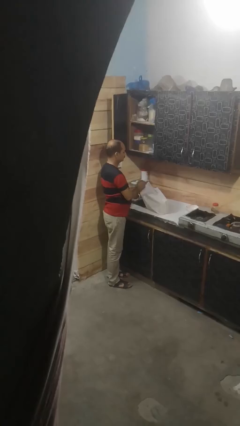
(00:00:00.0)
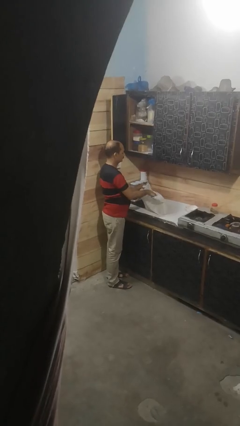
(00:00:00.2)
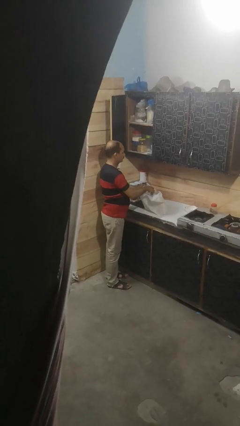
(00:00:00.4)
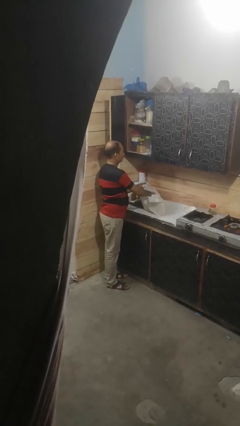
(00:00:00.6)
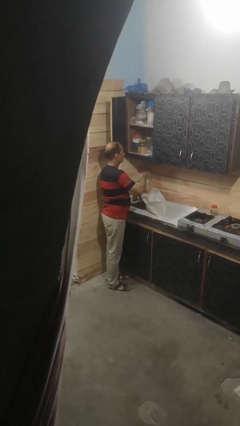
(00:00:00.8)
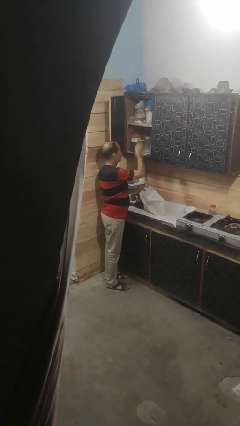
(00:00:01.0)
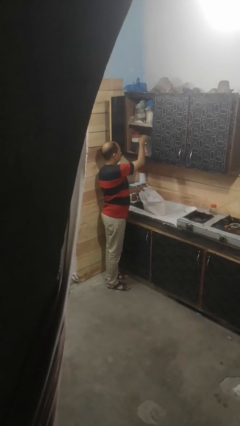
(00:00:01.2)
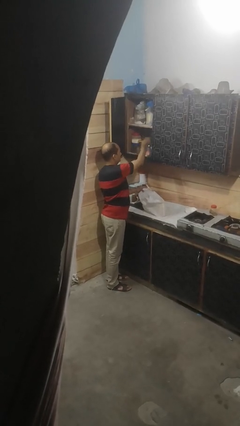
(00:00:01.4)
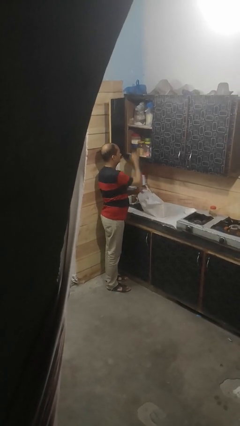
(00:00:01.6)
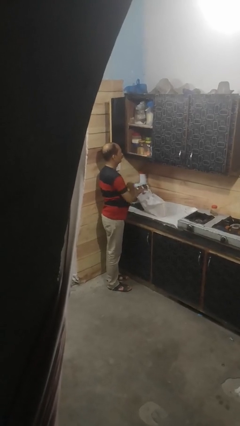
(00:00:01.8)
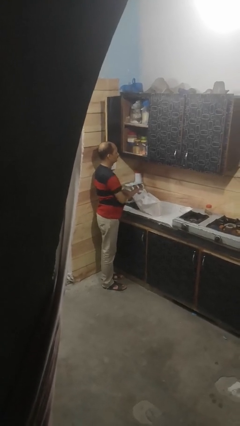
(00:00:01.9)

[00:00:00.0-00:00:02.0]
person loads groceries into cabinet

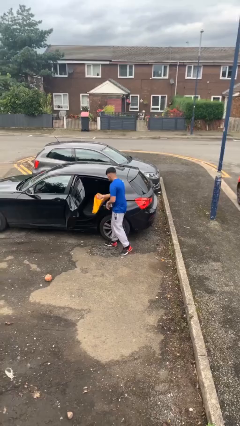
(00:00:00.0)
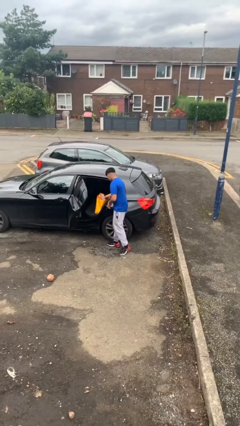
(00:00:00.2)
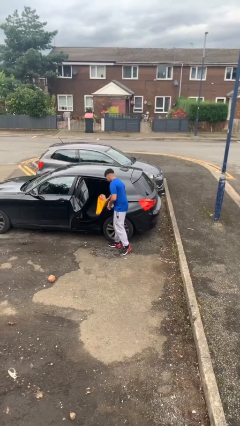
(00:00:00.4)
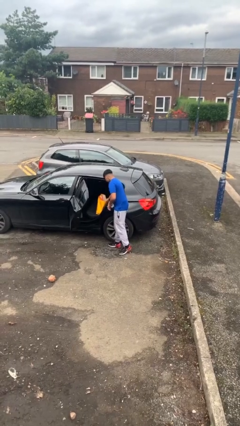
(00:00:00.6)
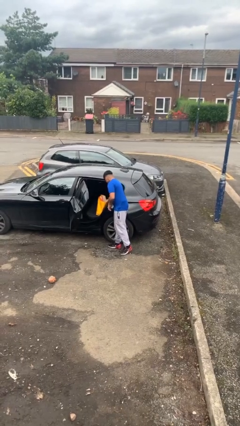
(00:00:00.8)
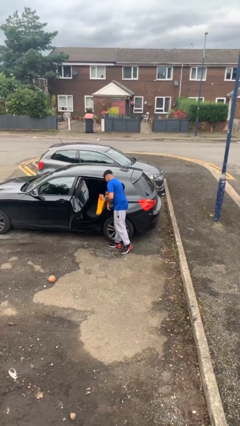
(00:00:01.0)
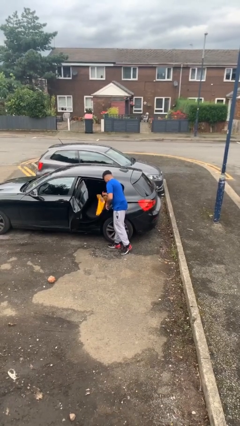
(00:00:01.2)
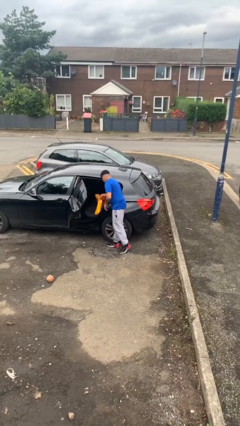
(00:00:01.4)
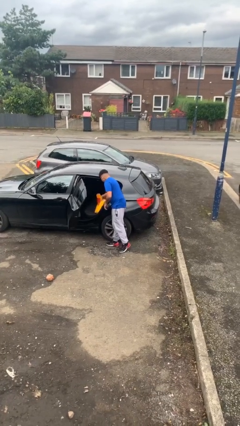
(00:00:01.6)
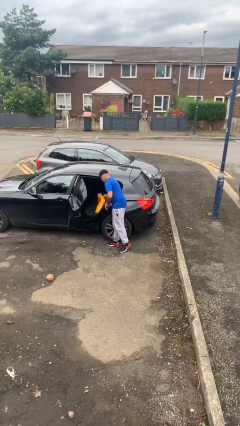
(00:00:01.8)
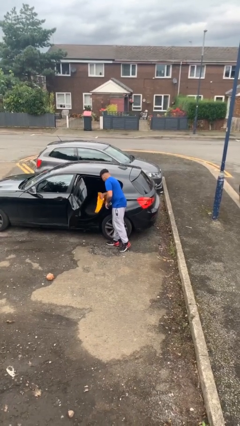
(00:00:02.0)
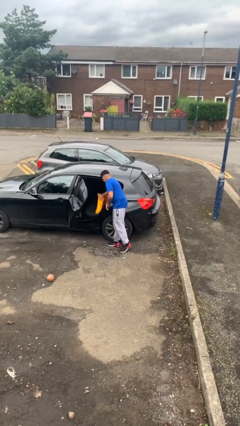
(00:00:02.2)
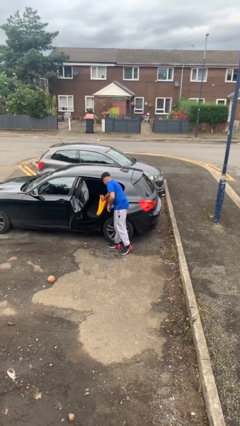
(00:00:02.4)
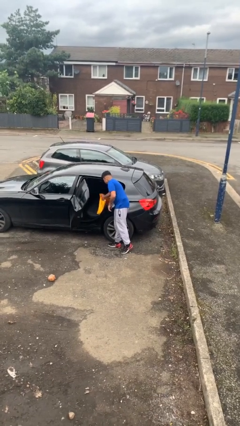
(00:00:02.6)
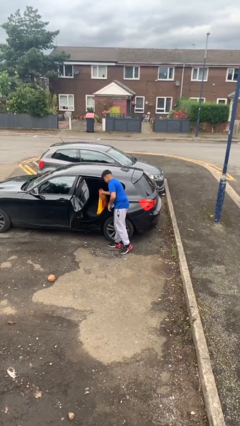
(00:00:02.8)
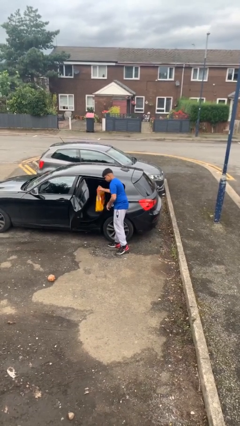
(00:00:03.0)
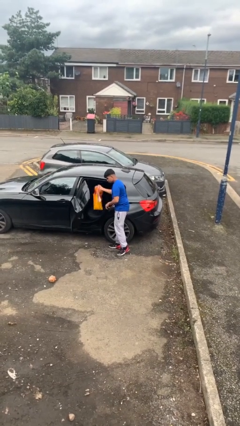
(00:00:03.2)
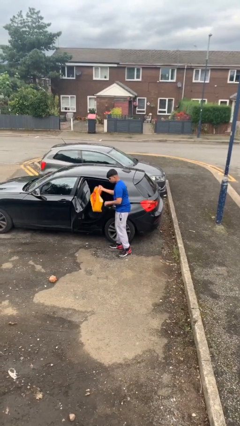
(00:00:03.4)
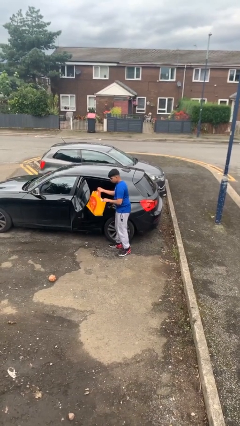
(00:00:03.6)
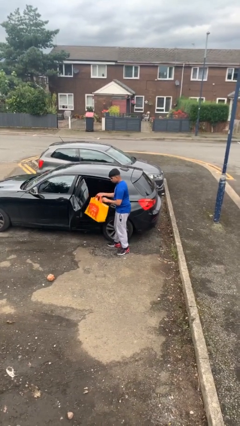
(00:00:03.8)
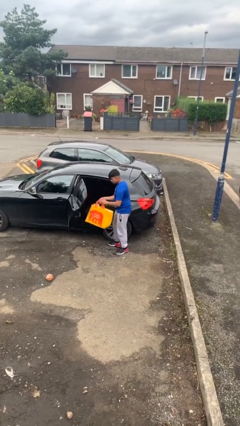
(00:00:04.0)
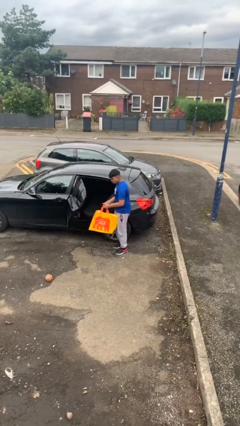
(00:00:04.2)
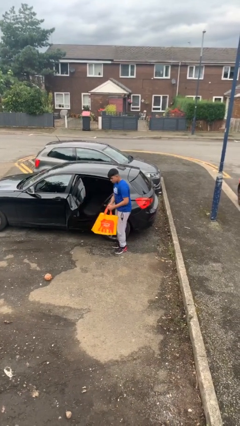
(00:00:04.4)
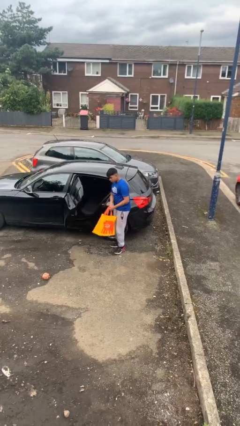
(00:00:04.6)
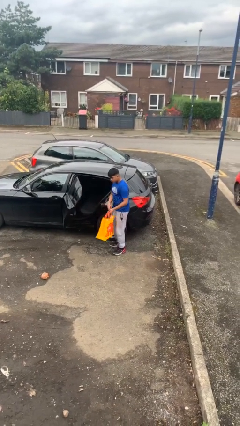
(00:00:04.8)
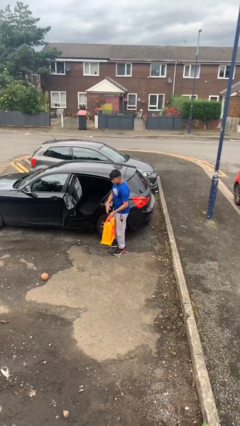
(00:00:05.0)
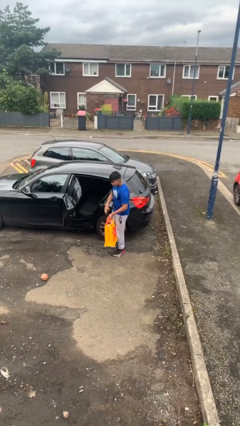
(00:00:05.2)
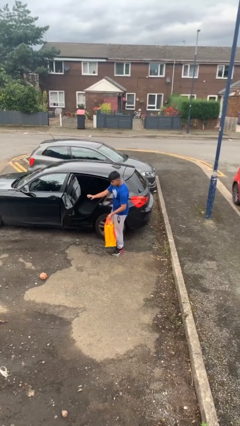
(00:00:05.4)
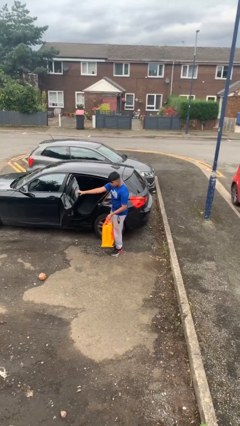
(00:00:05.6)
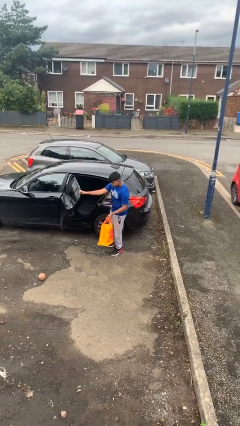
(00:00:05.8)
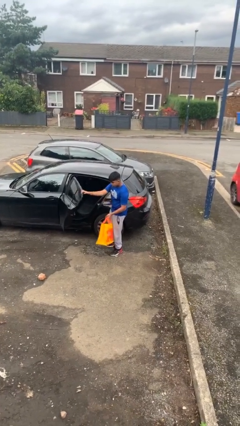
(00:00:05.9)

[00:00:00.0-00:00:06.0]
person unloads car

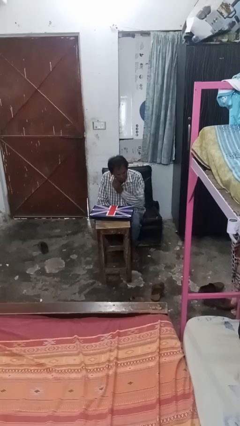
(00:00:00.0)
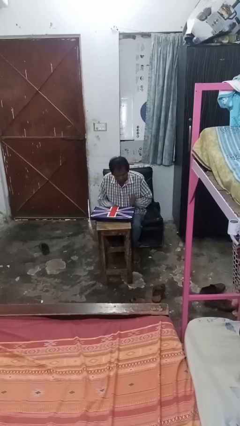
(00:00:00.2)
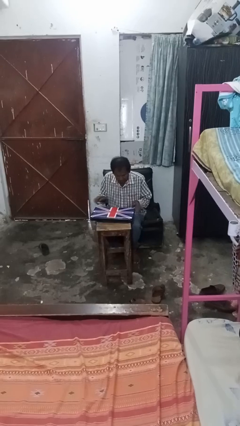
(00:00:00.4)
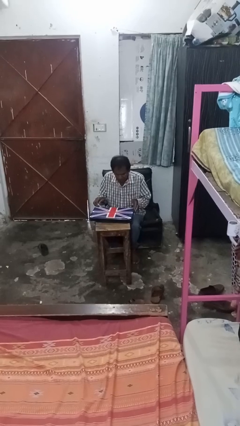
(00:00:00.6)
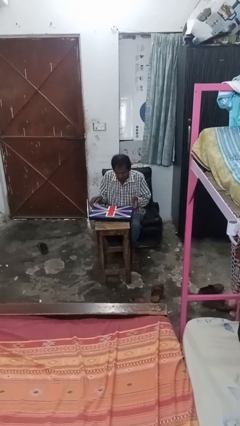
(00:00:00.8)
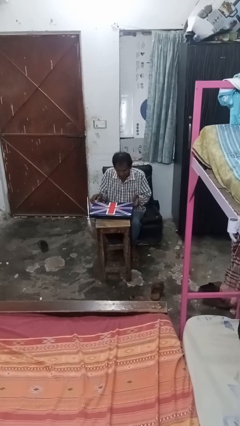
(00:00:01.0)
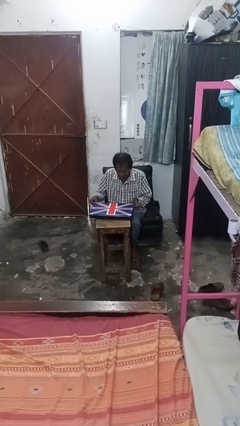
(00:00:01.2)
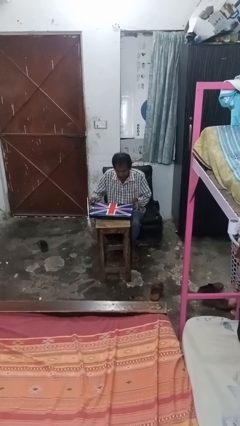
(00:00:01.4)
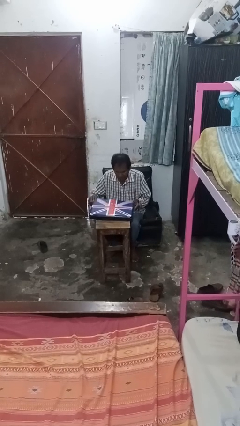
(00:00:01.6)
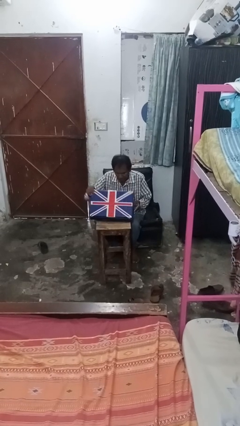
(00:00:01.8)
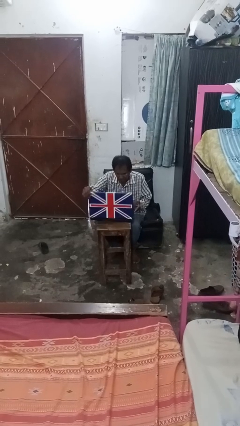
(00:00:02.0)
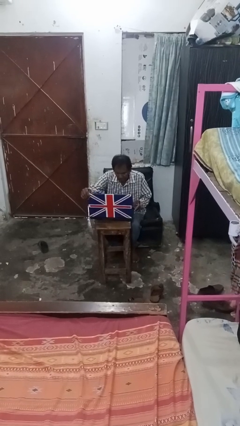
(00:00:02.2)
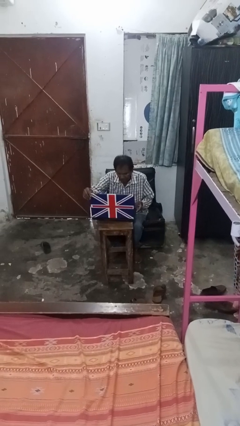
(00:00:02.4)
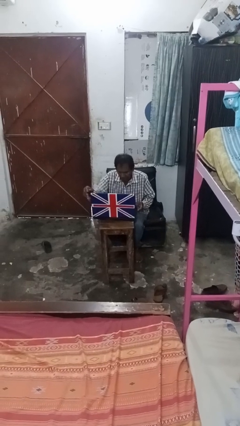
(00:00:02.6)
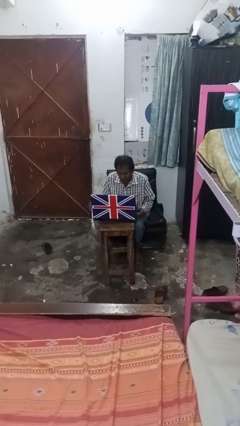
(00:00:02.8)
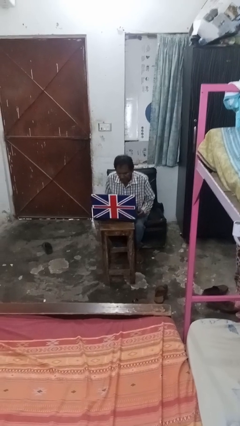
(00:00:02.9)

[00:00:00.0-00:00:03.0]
person opens laptop

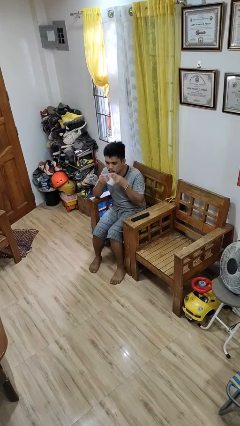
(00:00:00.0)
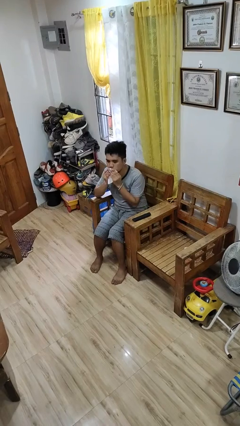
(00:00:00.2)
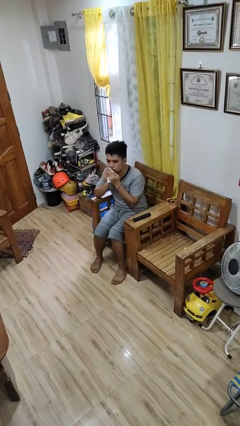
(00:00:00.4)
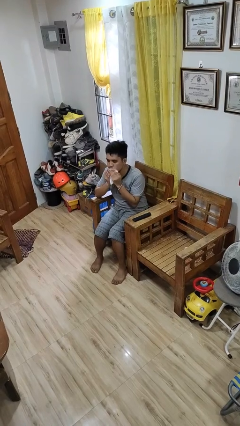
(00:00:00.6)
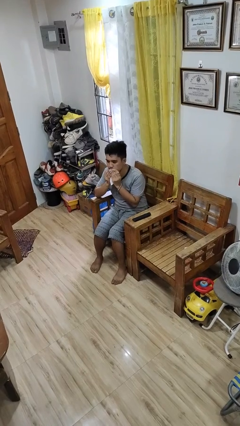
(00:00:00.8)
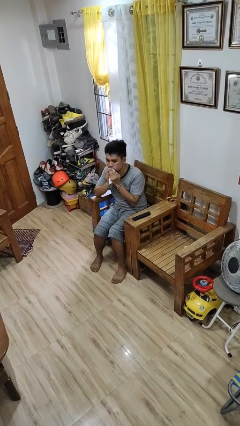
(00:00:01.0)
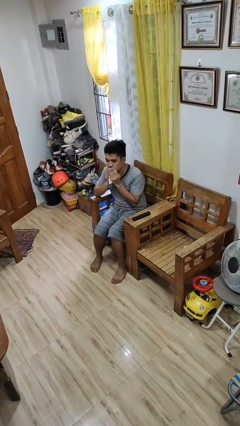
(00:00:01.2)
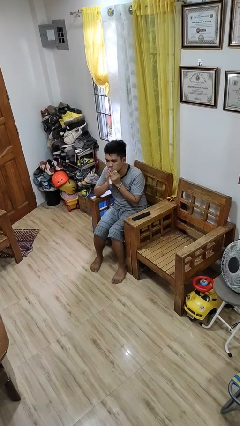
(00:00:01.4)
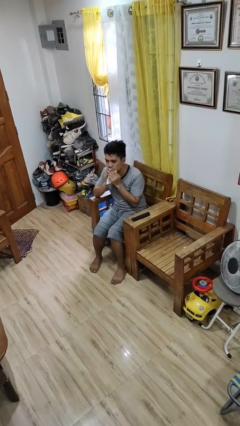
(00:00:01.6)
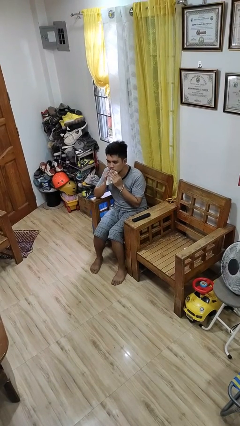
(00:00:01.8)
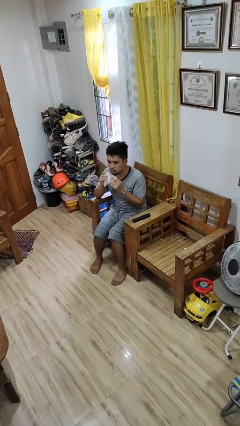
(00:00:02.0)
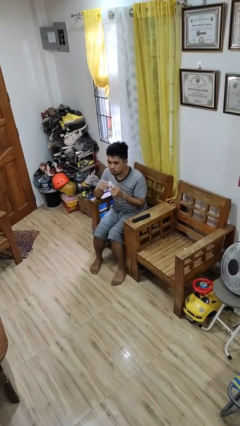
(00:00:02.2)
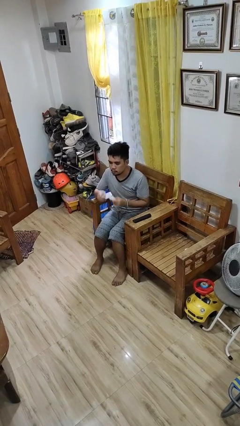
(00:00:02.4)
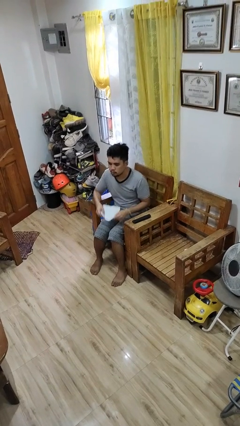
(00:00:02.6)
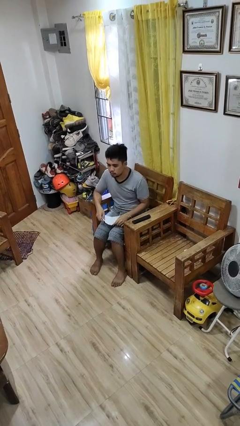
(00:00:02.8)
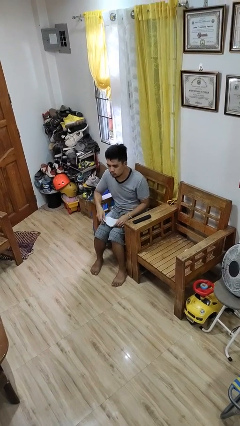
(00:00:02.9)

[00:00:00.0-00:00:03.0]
person wipes mouth with napkin

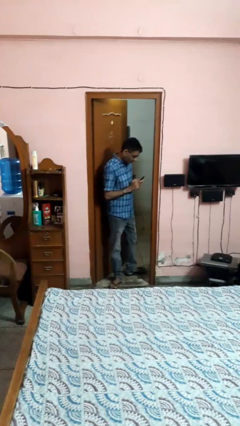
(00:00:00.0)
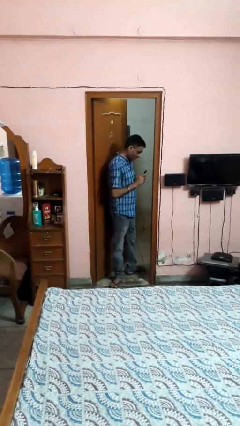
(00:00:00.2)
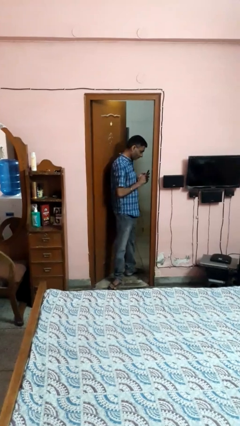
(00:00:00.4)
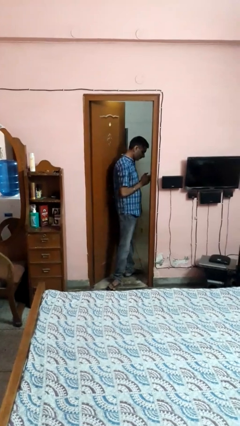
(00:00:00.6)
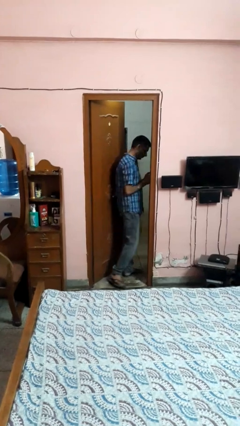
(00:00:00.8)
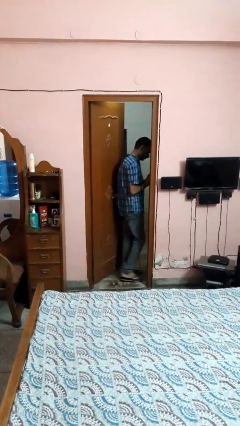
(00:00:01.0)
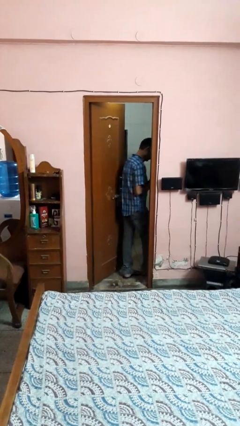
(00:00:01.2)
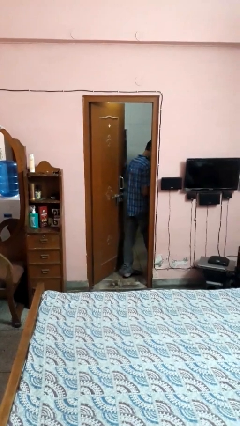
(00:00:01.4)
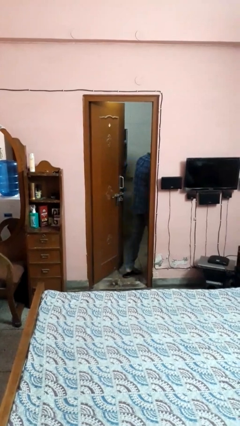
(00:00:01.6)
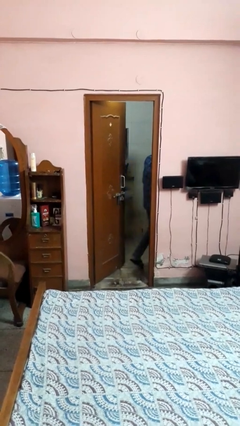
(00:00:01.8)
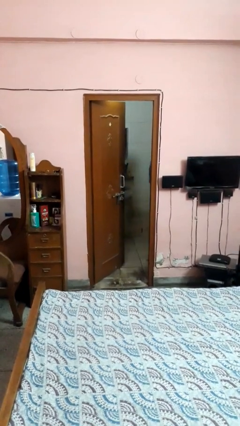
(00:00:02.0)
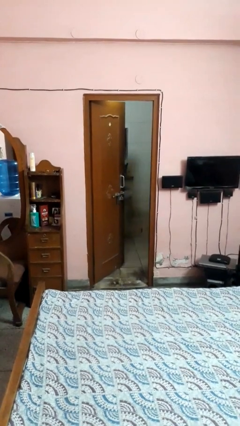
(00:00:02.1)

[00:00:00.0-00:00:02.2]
person exits scene through structure

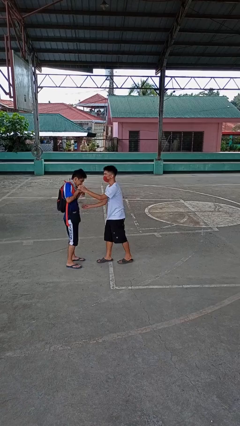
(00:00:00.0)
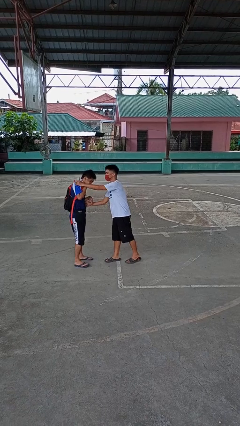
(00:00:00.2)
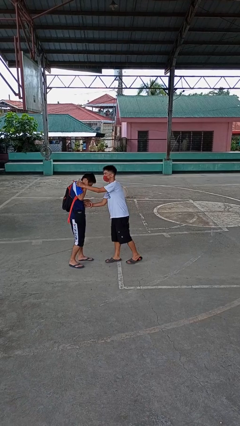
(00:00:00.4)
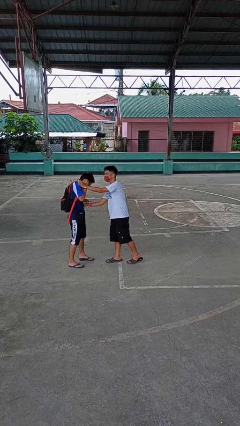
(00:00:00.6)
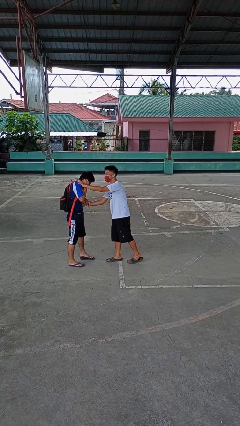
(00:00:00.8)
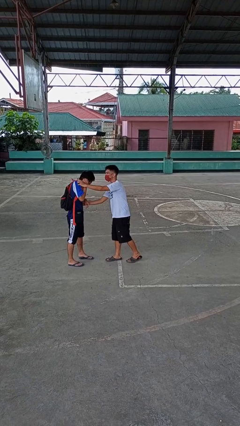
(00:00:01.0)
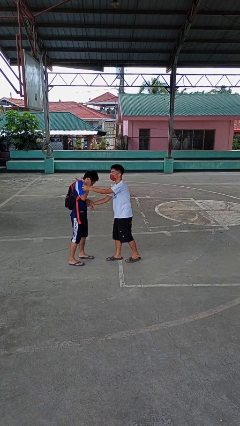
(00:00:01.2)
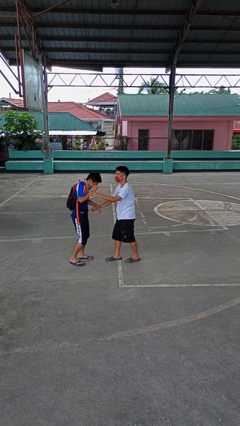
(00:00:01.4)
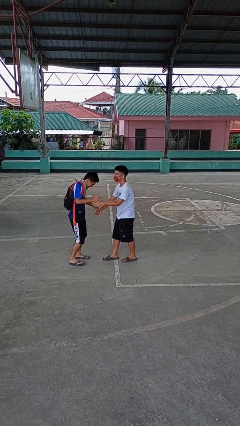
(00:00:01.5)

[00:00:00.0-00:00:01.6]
person tickles person
